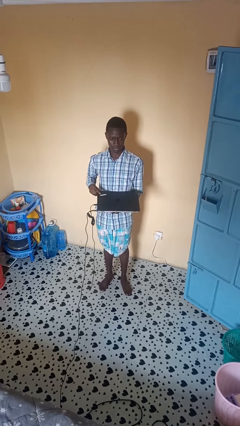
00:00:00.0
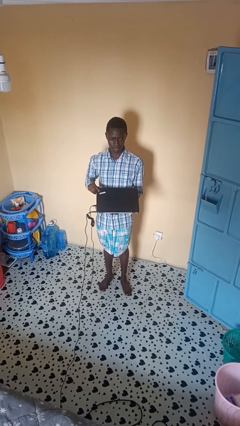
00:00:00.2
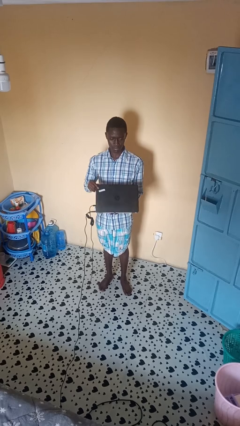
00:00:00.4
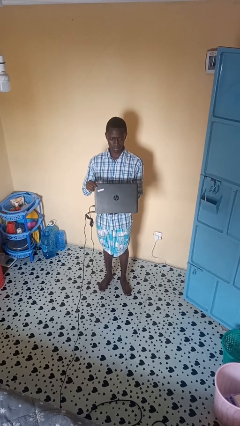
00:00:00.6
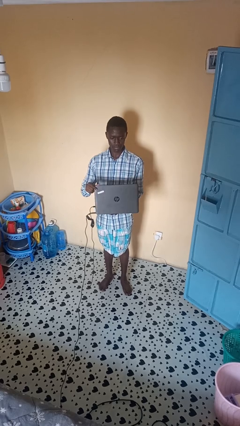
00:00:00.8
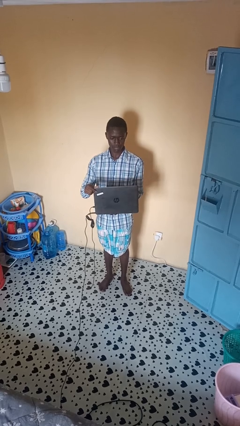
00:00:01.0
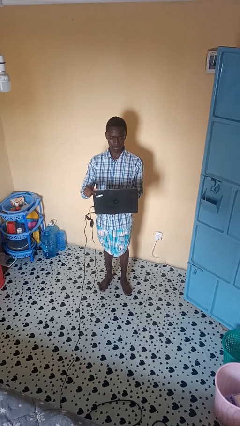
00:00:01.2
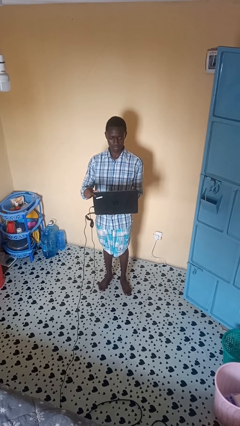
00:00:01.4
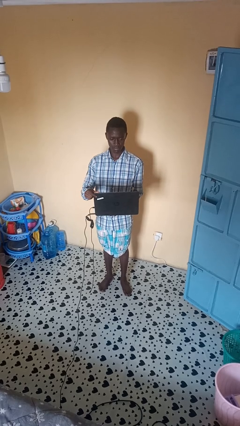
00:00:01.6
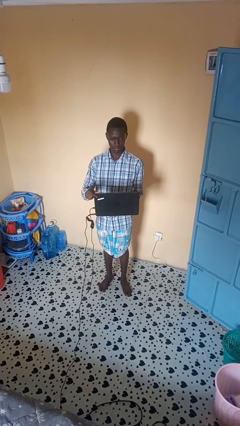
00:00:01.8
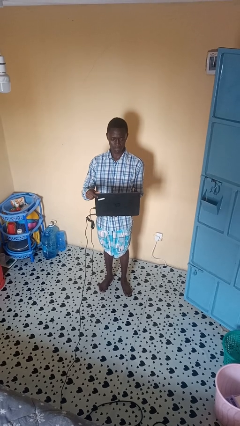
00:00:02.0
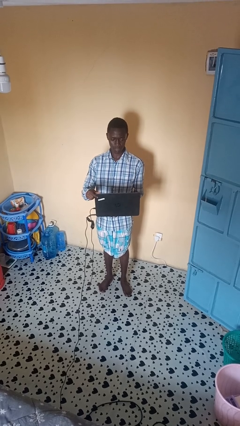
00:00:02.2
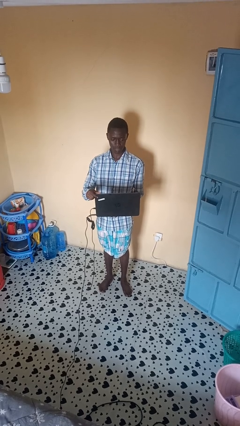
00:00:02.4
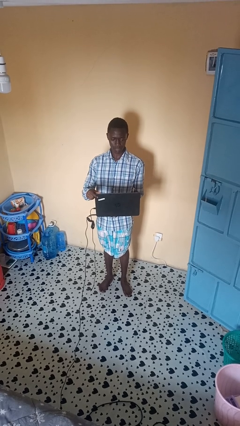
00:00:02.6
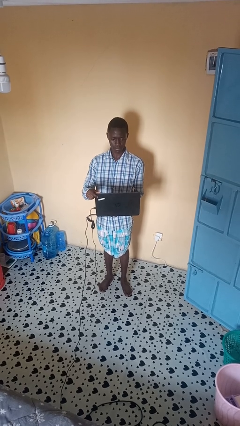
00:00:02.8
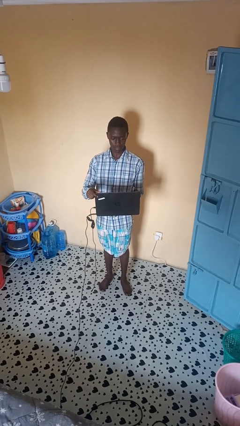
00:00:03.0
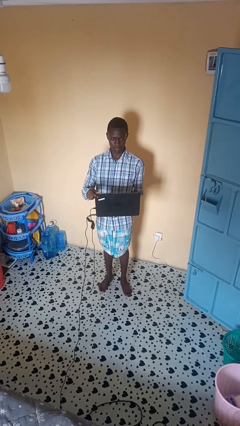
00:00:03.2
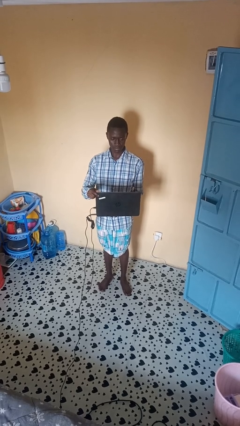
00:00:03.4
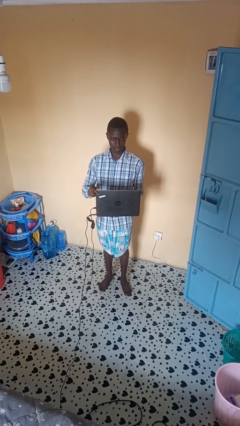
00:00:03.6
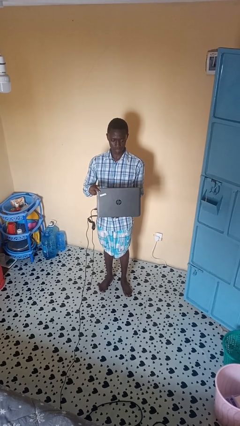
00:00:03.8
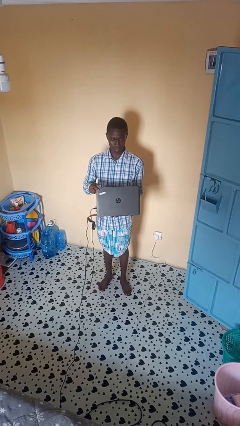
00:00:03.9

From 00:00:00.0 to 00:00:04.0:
person opens laptop

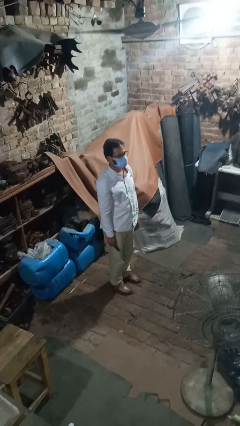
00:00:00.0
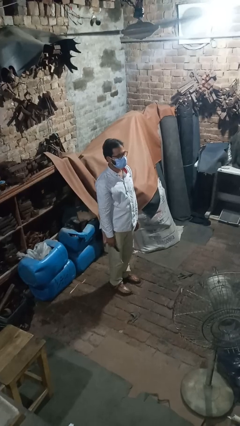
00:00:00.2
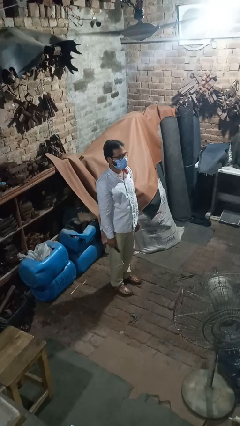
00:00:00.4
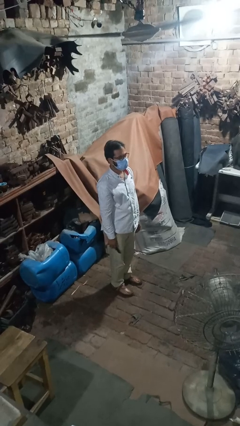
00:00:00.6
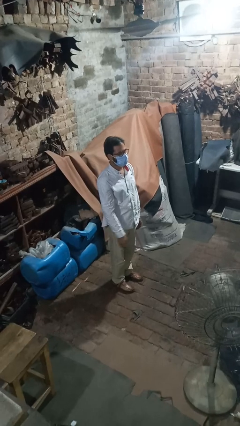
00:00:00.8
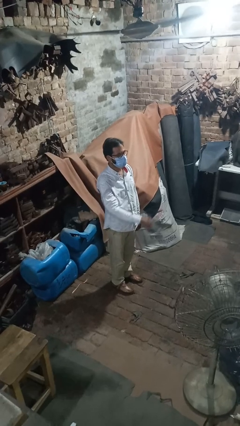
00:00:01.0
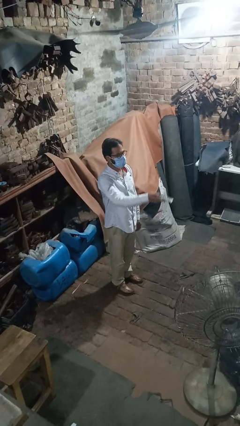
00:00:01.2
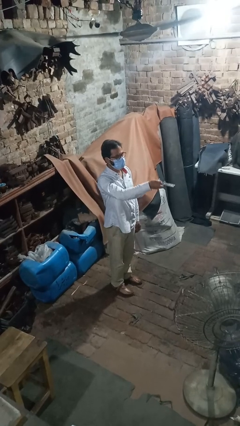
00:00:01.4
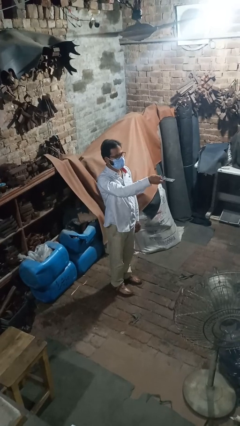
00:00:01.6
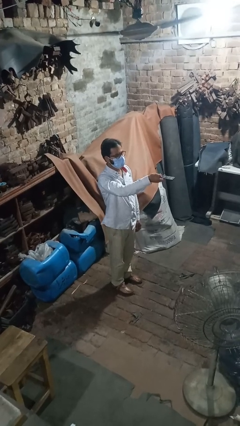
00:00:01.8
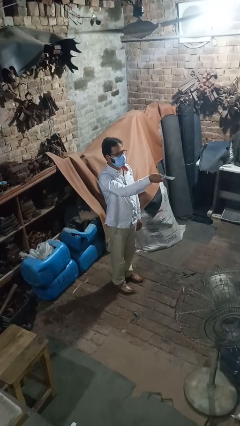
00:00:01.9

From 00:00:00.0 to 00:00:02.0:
person uses television remote

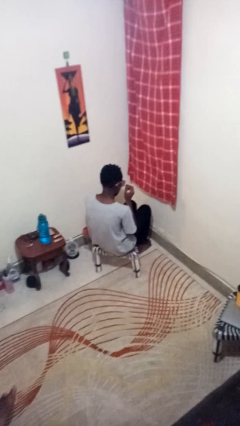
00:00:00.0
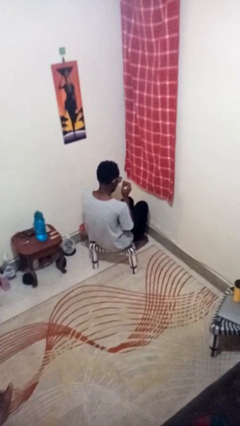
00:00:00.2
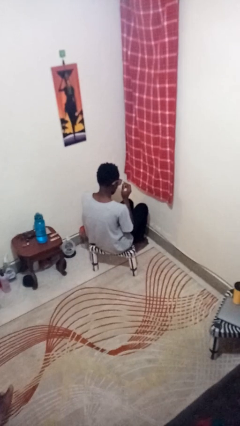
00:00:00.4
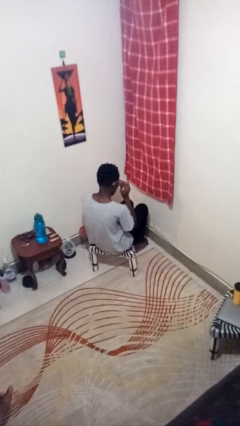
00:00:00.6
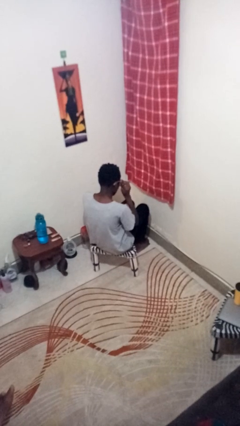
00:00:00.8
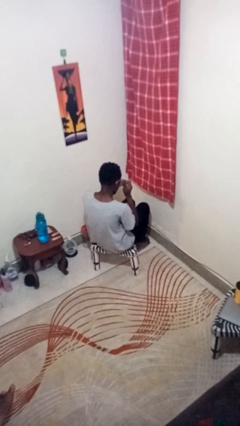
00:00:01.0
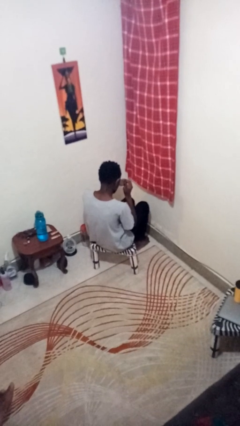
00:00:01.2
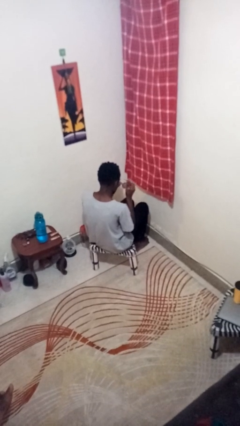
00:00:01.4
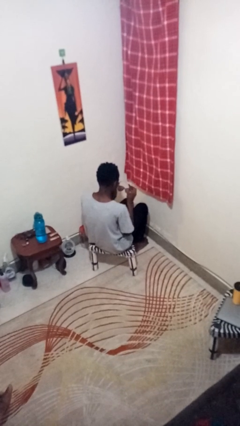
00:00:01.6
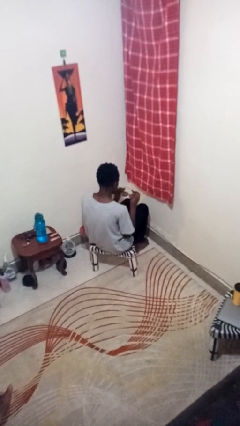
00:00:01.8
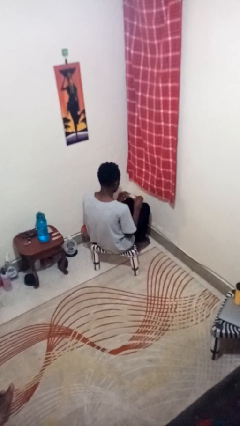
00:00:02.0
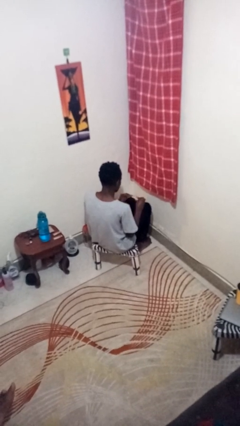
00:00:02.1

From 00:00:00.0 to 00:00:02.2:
person takes off glasses

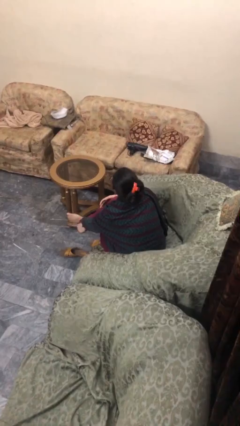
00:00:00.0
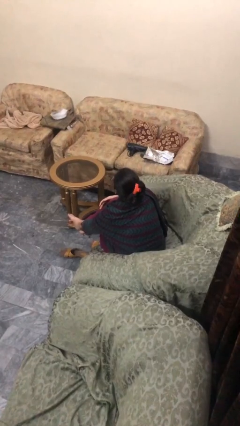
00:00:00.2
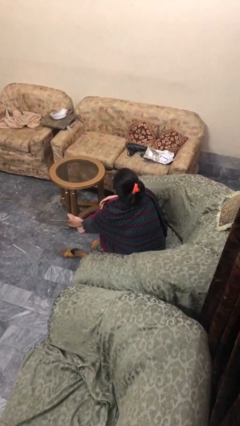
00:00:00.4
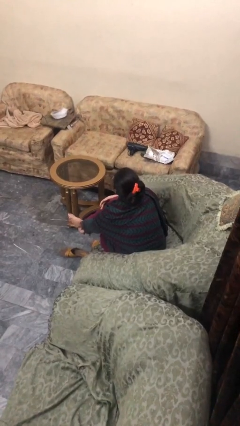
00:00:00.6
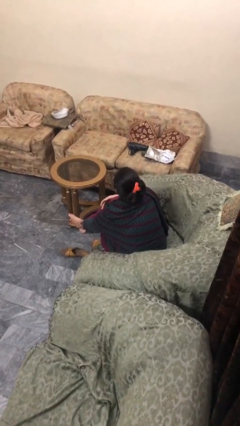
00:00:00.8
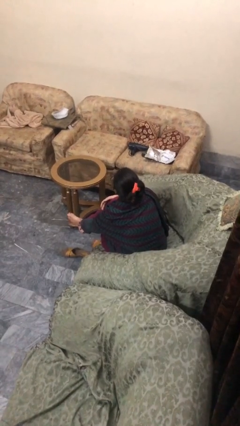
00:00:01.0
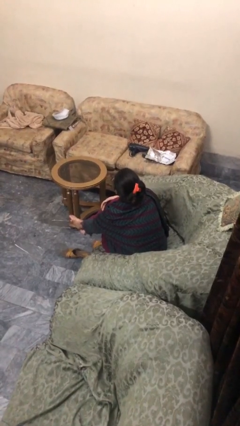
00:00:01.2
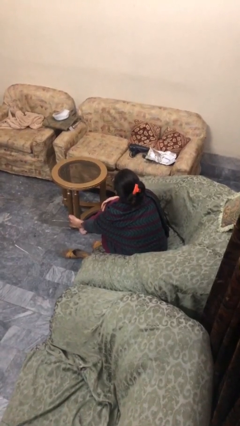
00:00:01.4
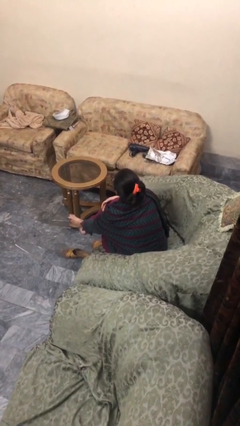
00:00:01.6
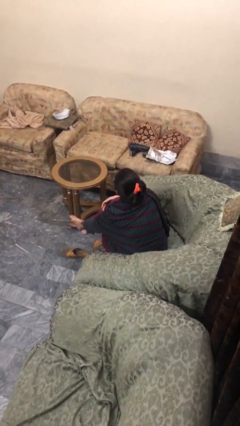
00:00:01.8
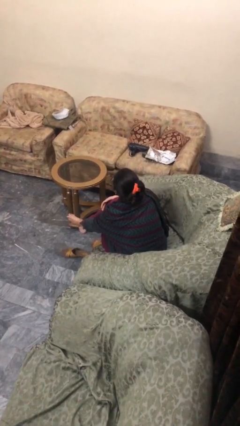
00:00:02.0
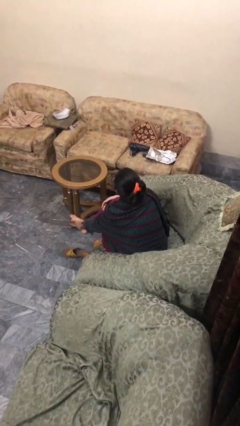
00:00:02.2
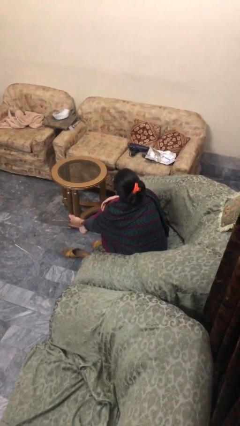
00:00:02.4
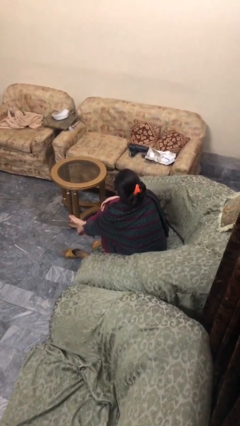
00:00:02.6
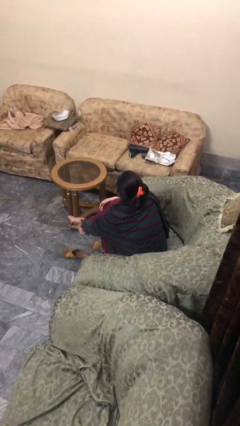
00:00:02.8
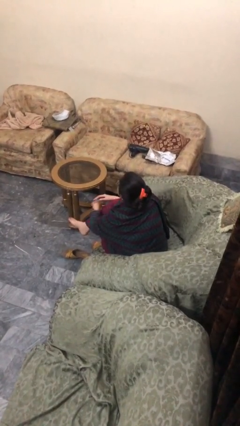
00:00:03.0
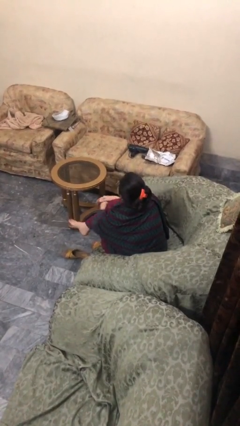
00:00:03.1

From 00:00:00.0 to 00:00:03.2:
person rubs foot

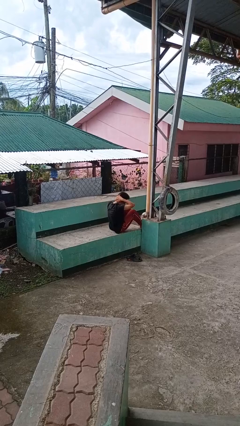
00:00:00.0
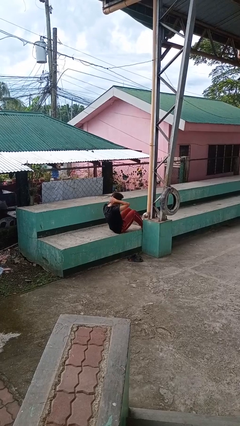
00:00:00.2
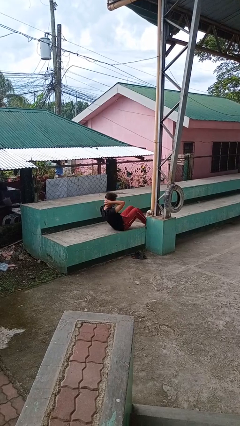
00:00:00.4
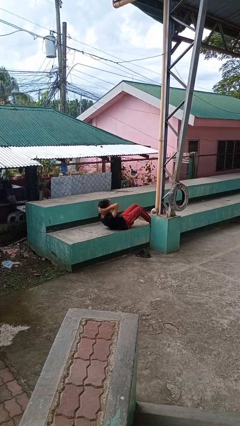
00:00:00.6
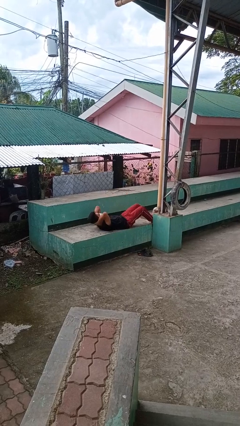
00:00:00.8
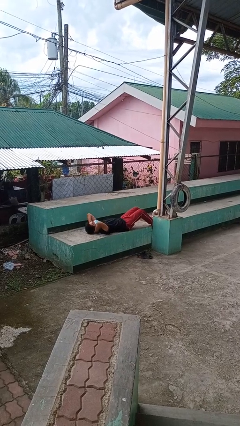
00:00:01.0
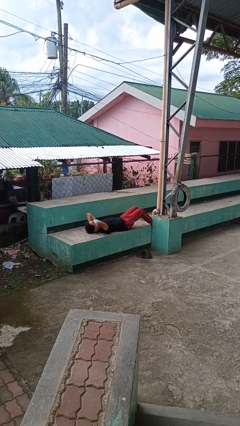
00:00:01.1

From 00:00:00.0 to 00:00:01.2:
person exercises with situp

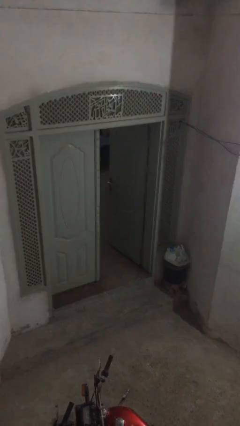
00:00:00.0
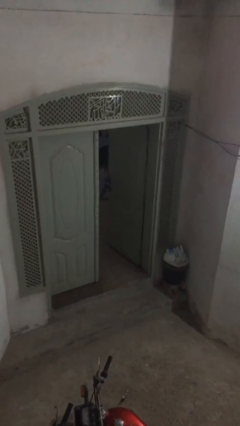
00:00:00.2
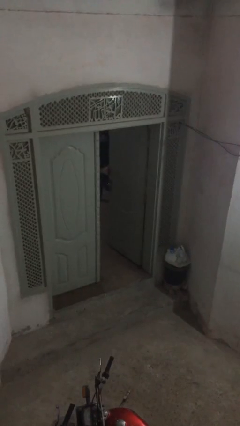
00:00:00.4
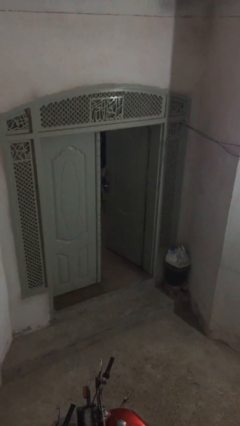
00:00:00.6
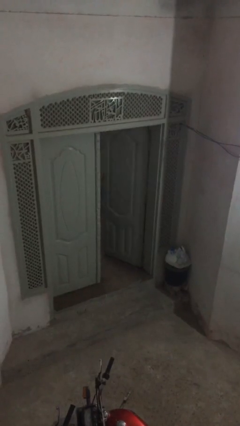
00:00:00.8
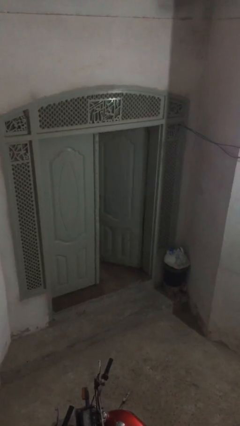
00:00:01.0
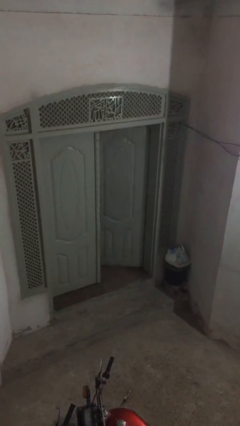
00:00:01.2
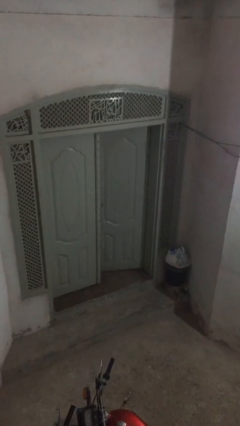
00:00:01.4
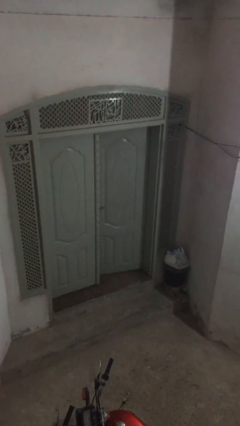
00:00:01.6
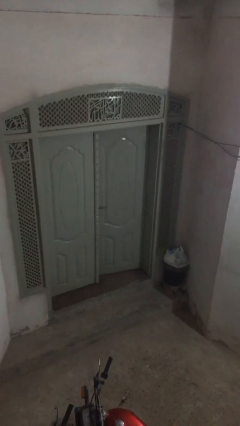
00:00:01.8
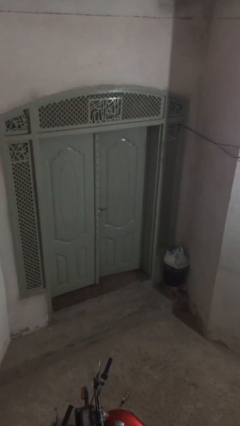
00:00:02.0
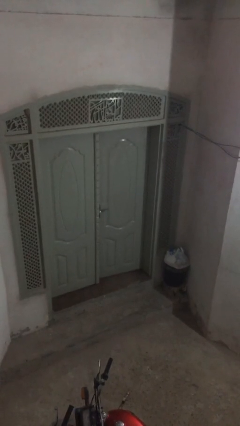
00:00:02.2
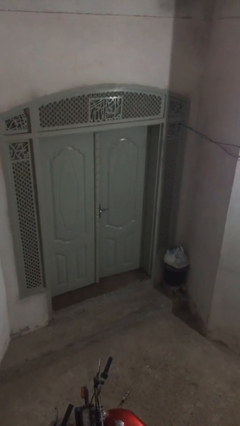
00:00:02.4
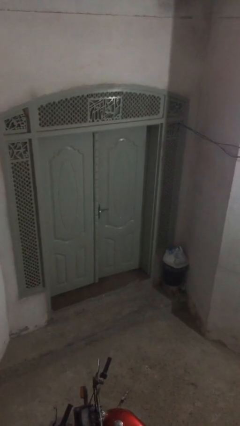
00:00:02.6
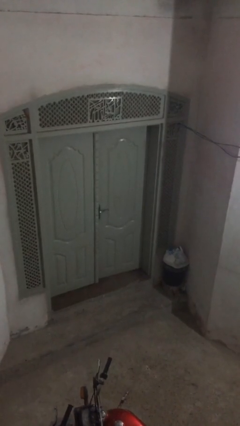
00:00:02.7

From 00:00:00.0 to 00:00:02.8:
person closes facility door

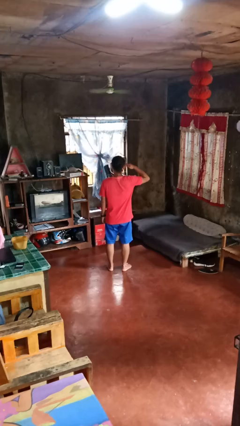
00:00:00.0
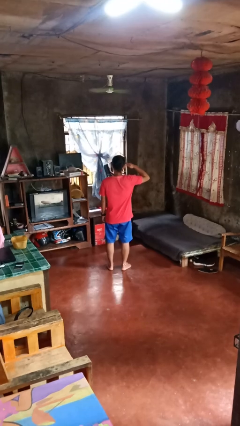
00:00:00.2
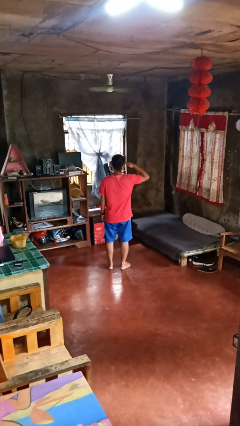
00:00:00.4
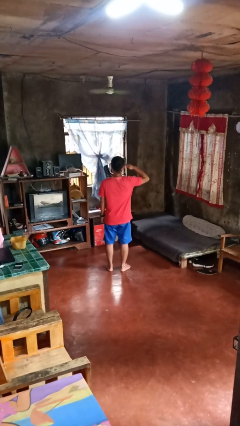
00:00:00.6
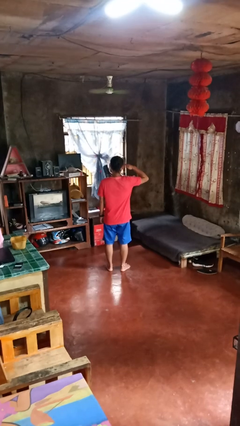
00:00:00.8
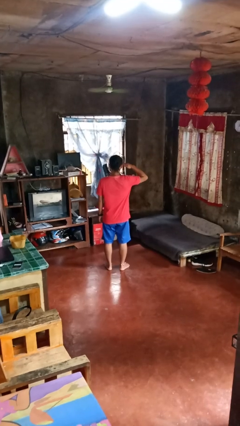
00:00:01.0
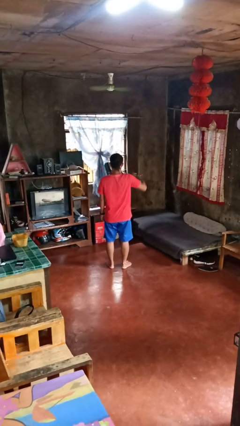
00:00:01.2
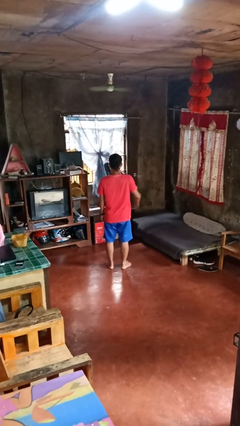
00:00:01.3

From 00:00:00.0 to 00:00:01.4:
person salutes

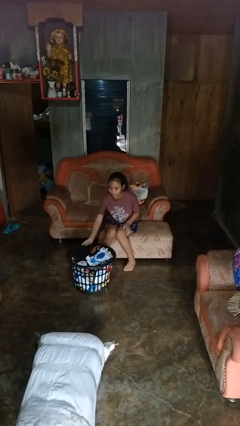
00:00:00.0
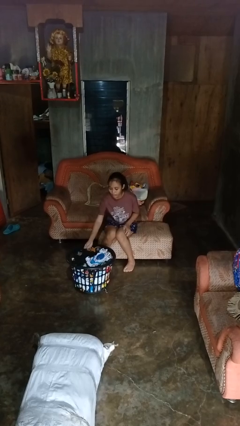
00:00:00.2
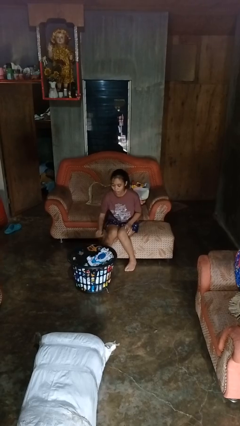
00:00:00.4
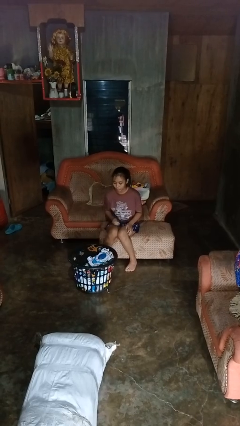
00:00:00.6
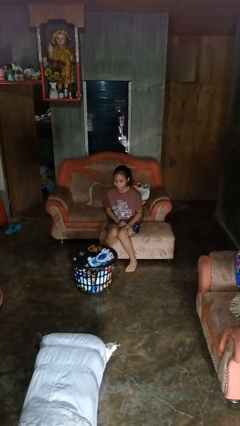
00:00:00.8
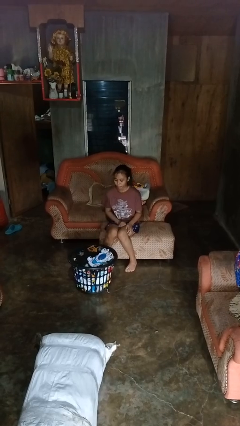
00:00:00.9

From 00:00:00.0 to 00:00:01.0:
person puts object into basket
